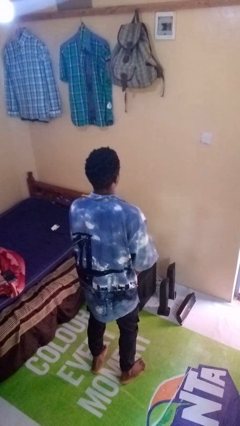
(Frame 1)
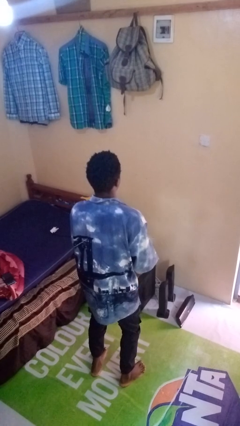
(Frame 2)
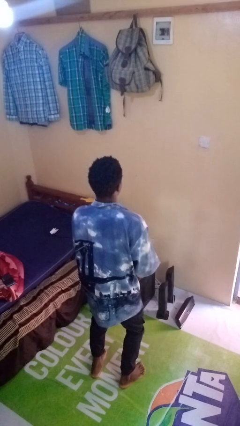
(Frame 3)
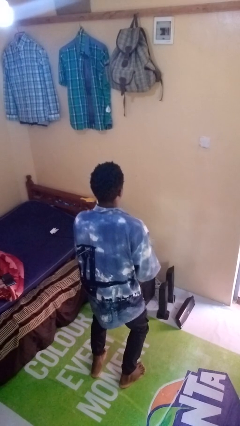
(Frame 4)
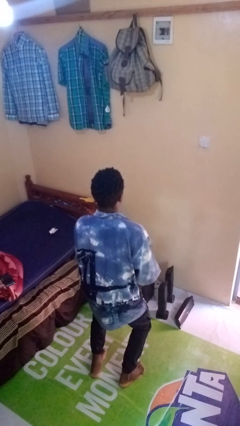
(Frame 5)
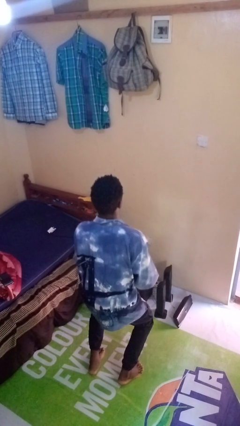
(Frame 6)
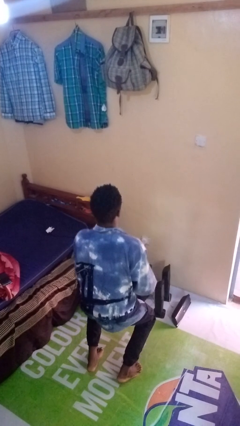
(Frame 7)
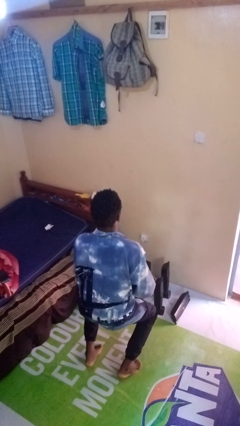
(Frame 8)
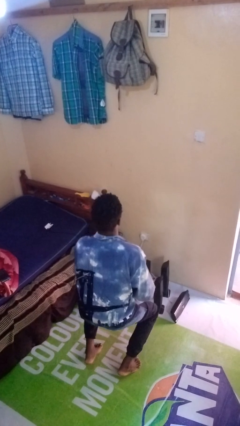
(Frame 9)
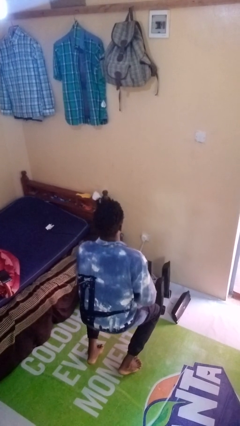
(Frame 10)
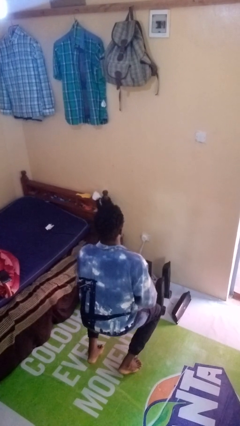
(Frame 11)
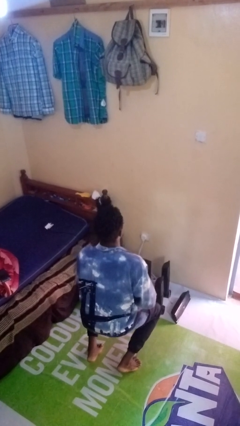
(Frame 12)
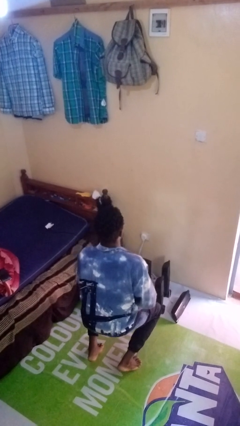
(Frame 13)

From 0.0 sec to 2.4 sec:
person squats

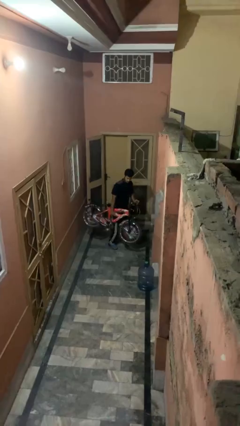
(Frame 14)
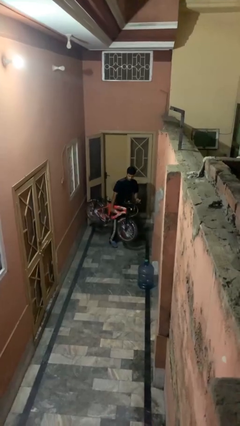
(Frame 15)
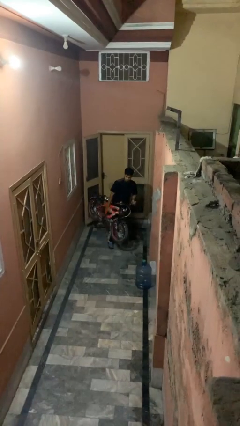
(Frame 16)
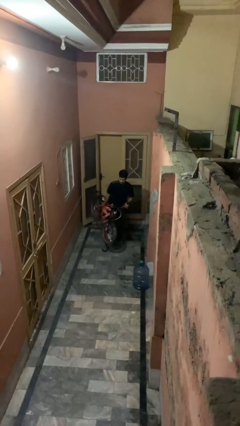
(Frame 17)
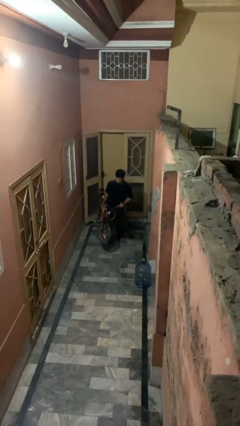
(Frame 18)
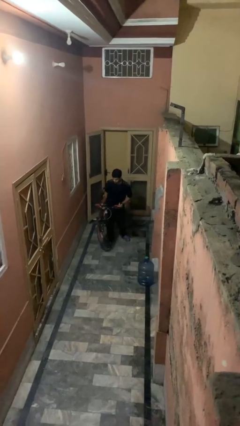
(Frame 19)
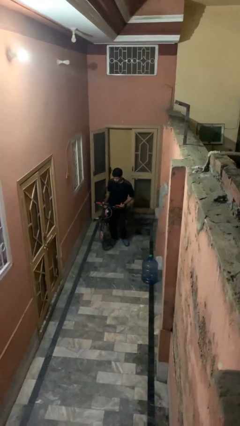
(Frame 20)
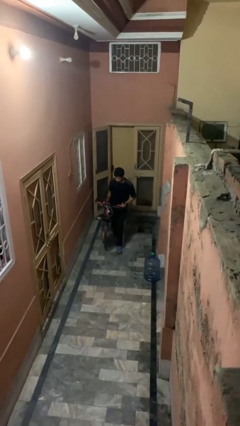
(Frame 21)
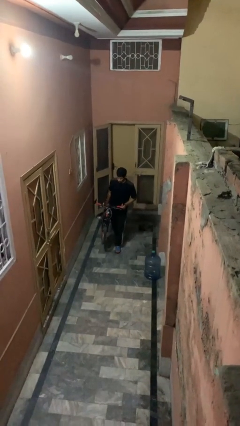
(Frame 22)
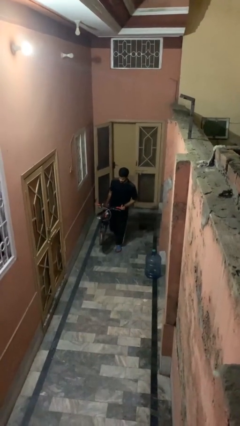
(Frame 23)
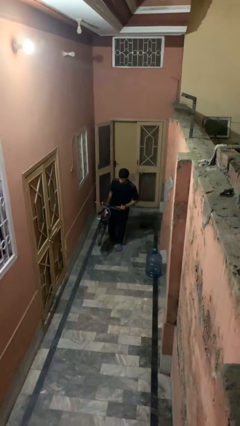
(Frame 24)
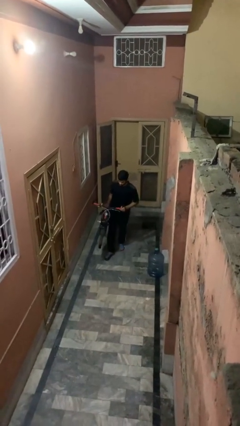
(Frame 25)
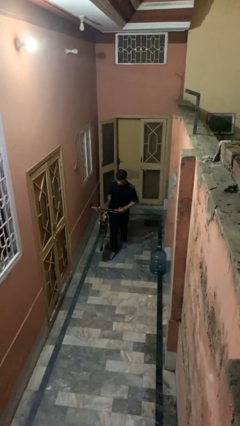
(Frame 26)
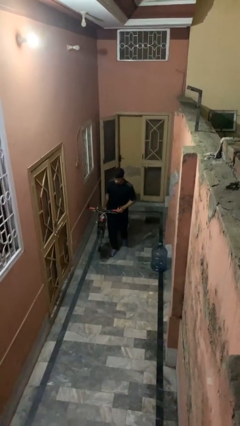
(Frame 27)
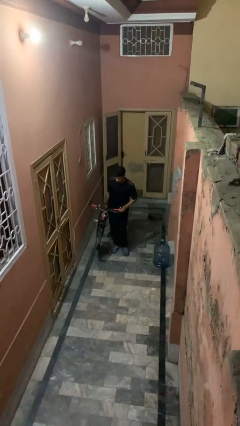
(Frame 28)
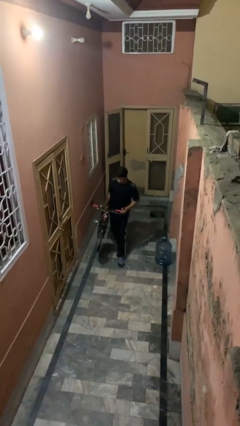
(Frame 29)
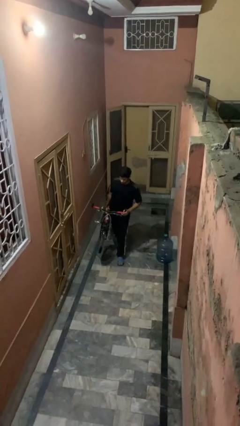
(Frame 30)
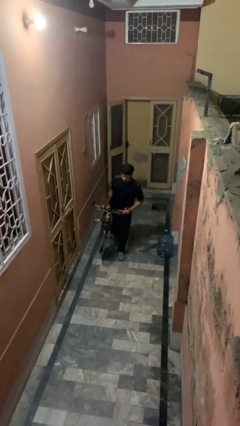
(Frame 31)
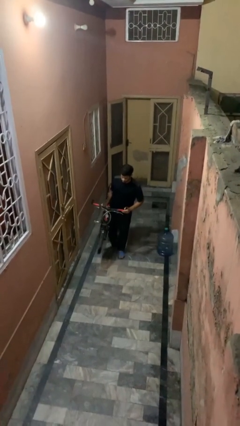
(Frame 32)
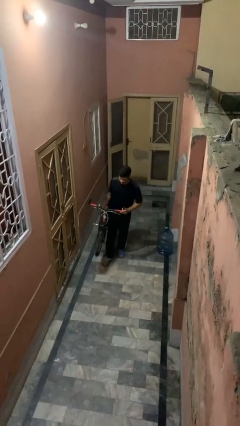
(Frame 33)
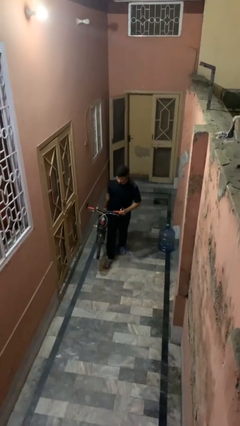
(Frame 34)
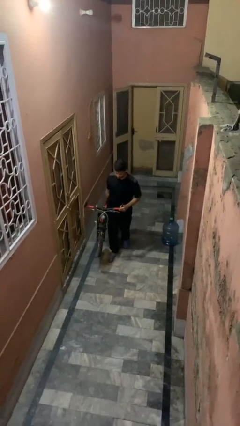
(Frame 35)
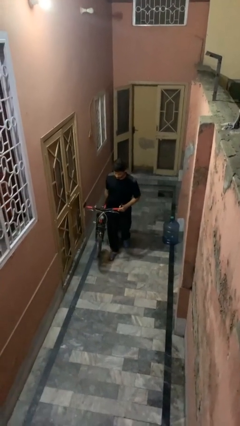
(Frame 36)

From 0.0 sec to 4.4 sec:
person carries bicycle

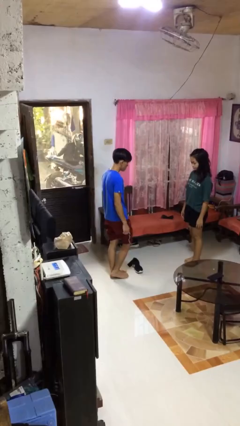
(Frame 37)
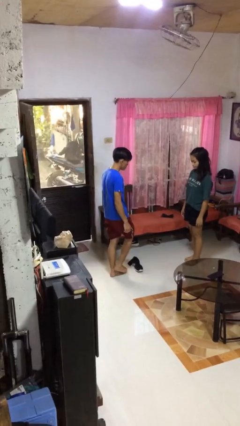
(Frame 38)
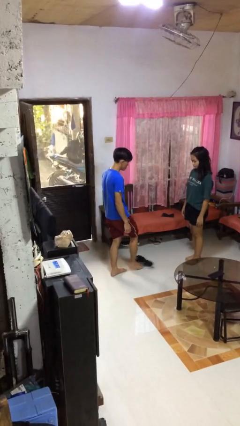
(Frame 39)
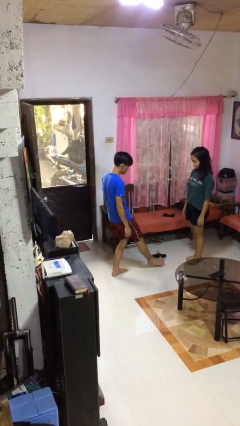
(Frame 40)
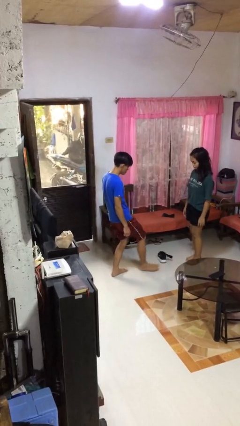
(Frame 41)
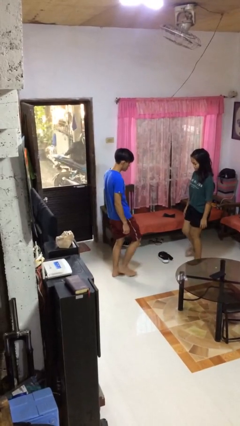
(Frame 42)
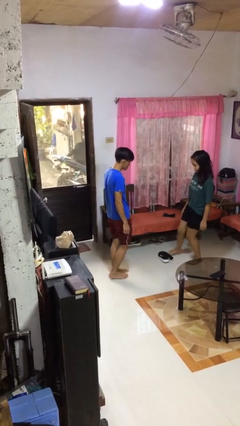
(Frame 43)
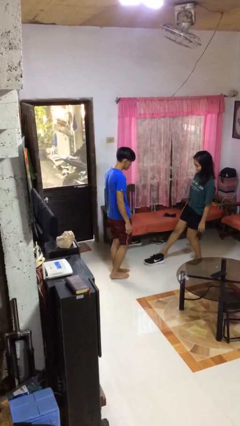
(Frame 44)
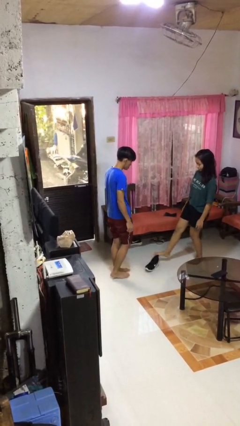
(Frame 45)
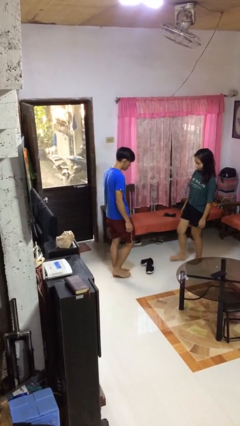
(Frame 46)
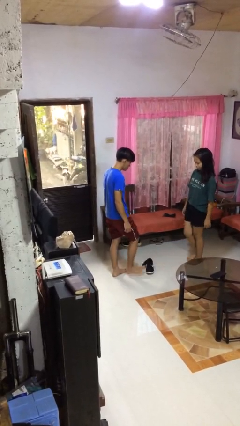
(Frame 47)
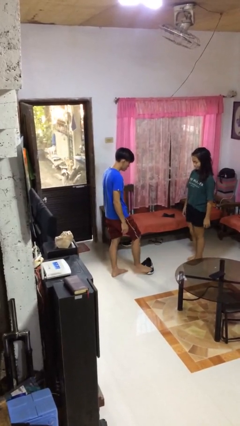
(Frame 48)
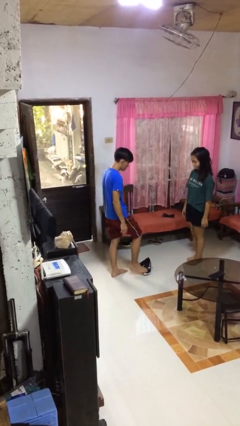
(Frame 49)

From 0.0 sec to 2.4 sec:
person kicks object to person

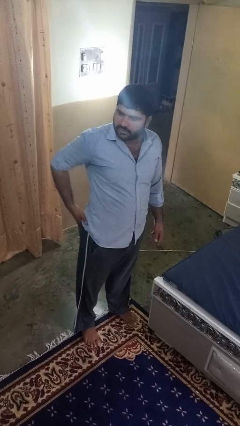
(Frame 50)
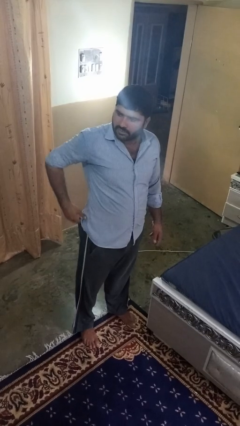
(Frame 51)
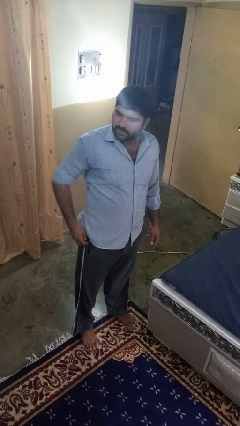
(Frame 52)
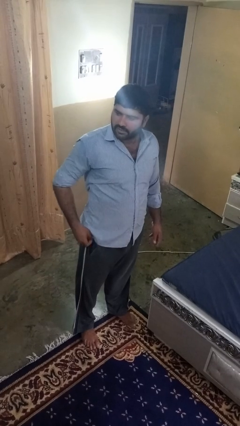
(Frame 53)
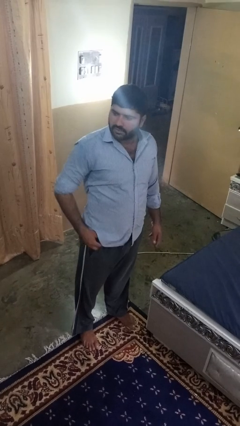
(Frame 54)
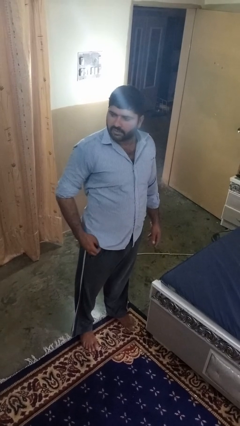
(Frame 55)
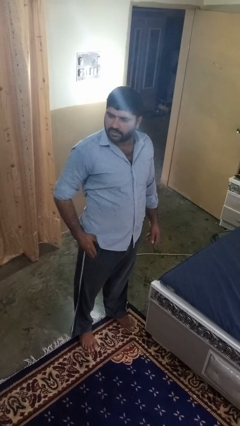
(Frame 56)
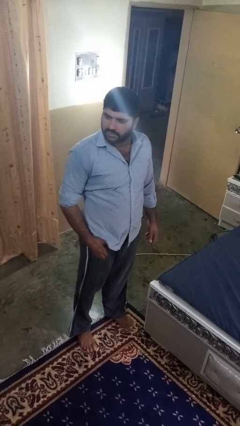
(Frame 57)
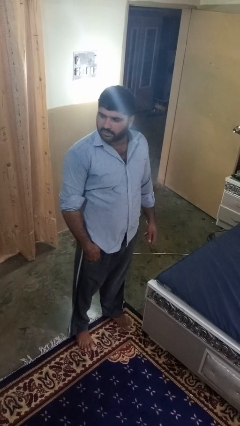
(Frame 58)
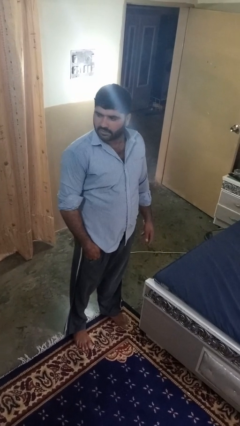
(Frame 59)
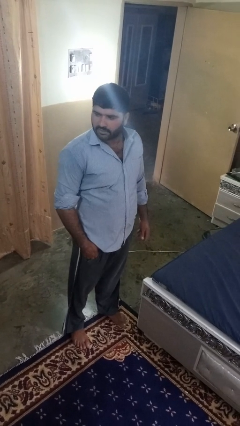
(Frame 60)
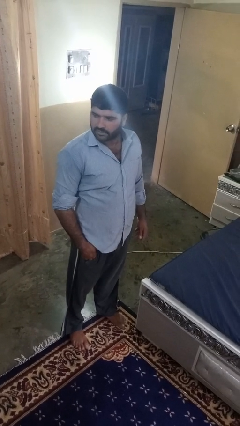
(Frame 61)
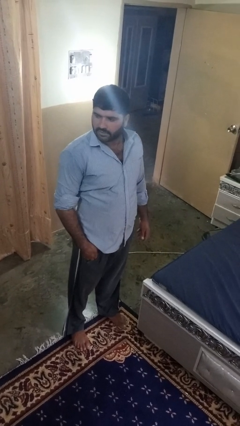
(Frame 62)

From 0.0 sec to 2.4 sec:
person puts hands in back pockets

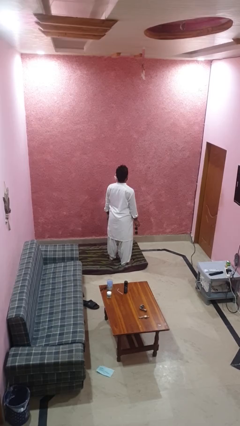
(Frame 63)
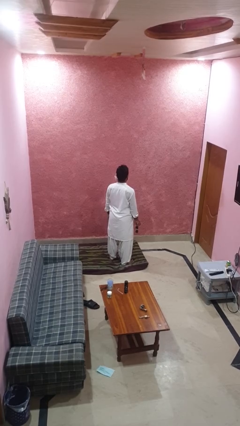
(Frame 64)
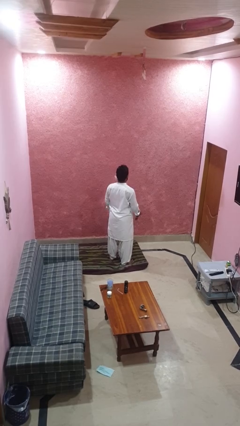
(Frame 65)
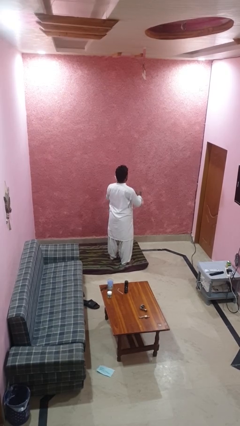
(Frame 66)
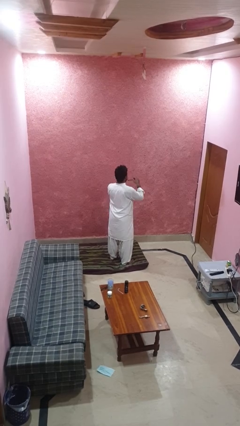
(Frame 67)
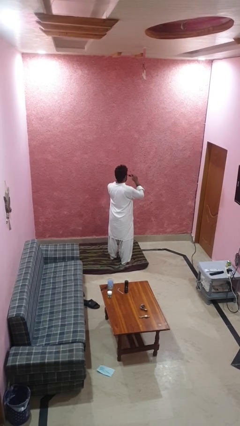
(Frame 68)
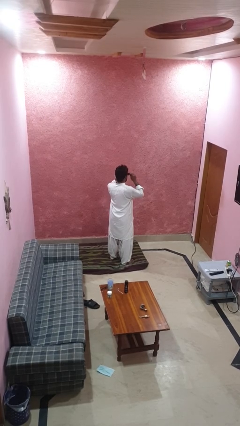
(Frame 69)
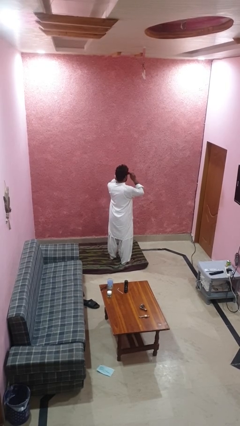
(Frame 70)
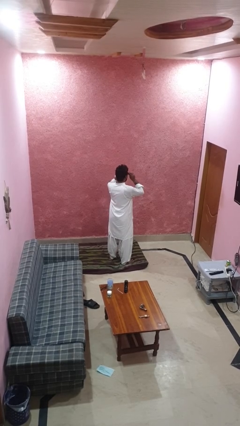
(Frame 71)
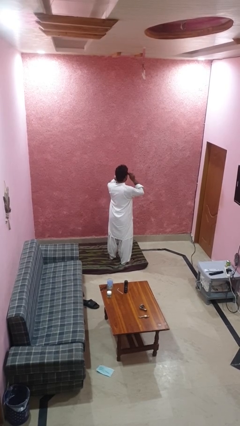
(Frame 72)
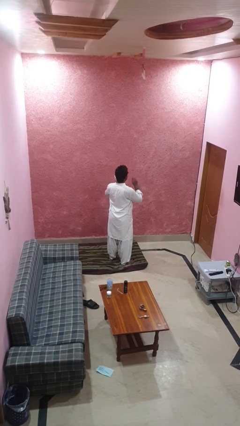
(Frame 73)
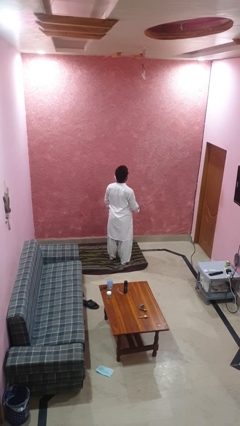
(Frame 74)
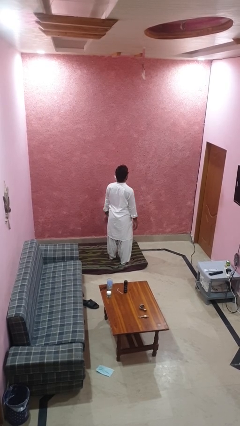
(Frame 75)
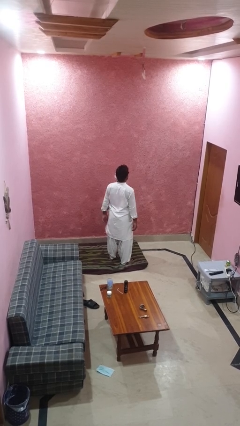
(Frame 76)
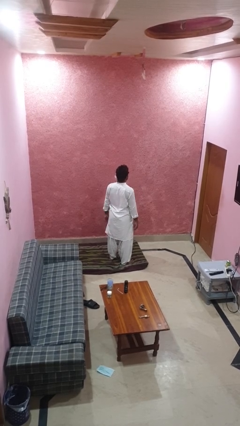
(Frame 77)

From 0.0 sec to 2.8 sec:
person puts on sunglasses

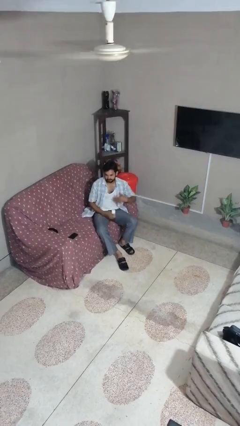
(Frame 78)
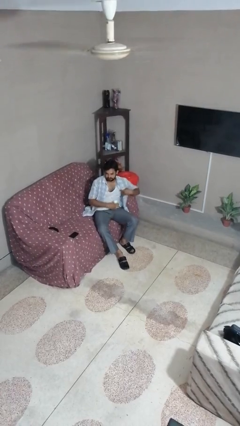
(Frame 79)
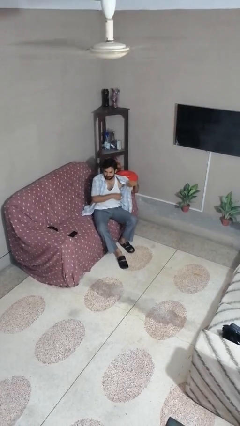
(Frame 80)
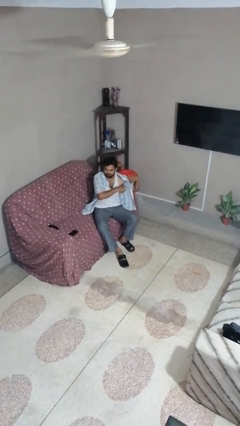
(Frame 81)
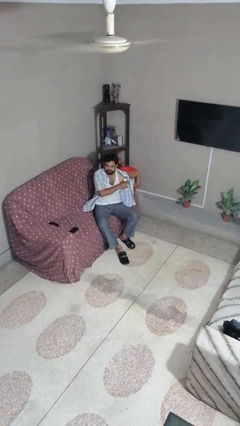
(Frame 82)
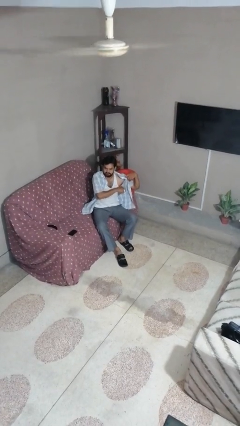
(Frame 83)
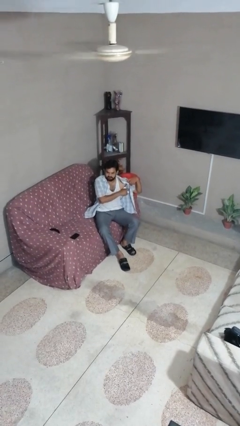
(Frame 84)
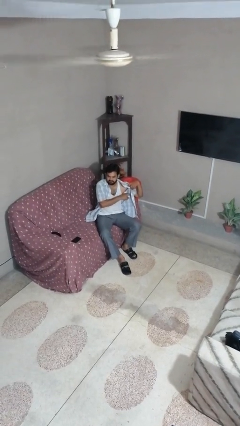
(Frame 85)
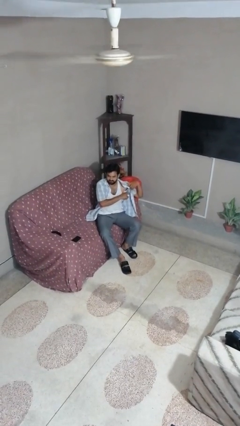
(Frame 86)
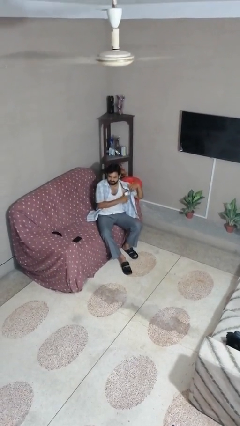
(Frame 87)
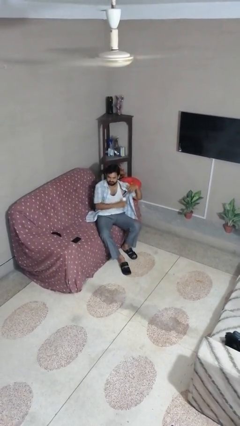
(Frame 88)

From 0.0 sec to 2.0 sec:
person applies deodorant

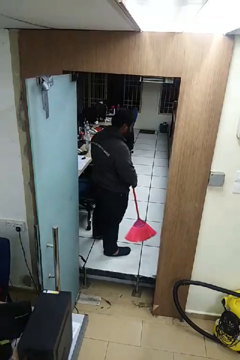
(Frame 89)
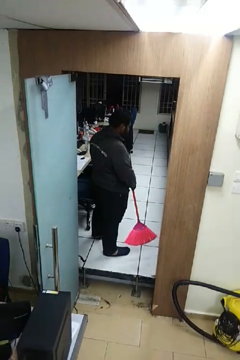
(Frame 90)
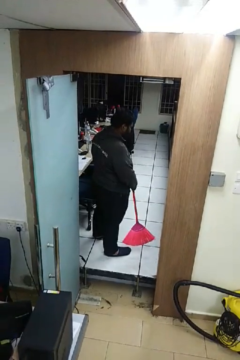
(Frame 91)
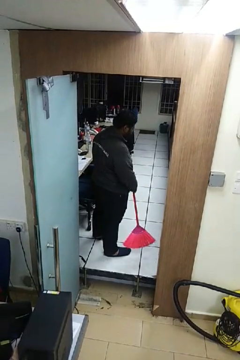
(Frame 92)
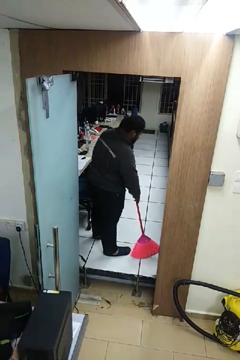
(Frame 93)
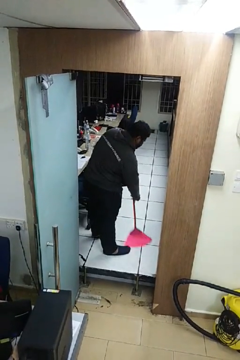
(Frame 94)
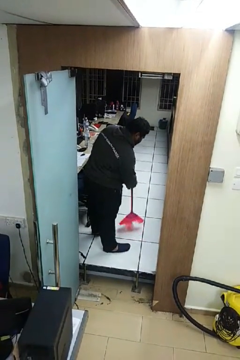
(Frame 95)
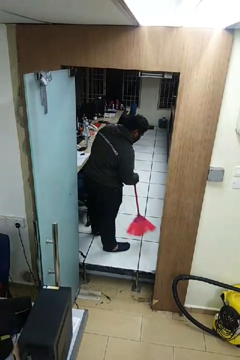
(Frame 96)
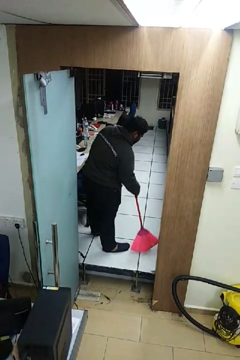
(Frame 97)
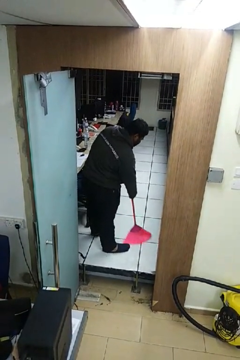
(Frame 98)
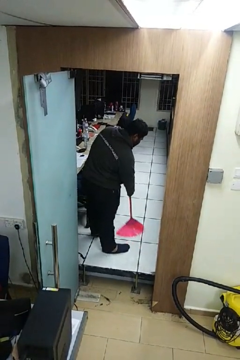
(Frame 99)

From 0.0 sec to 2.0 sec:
person sweeps floor
